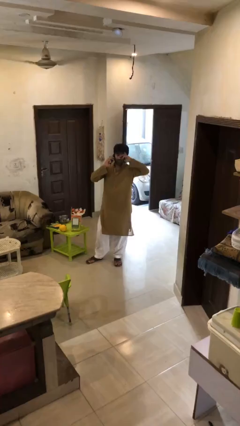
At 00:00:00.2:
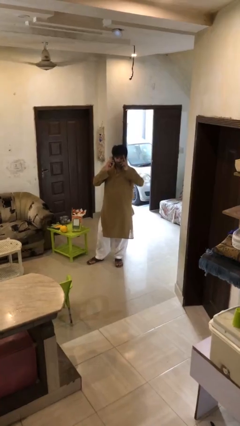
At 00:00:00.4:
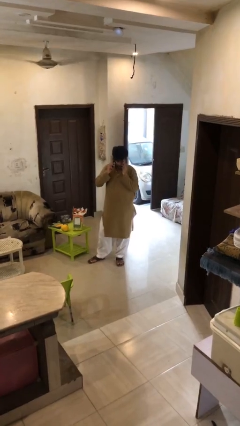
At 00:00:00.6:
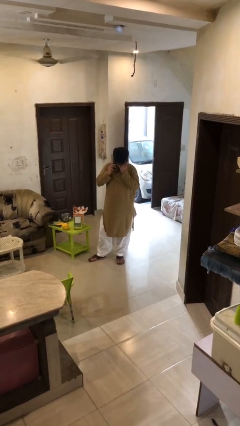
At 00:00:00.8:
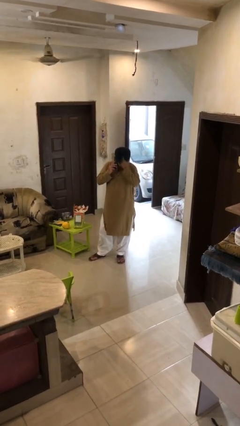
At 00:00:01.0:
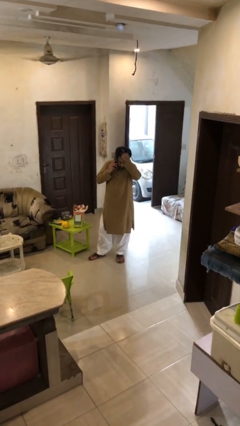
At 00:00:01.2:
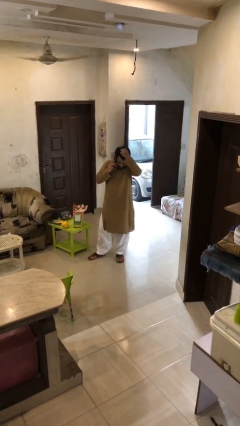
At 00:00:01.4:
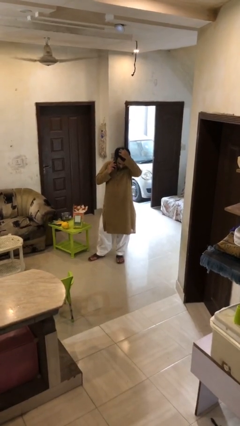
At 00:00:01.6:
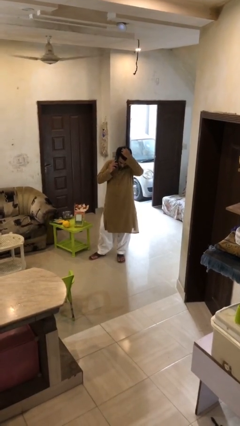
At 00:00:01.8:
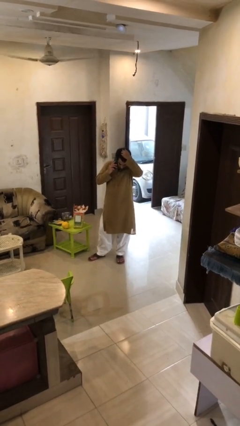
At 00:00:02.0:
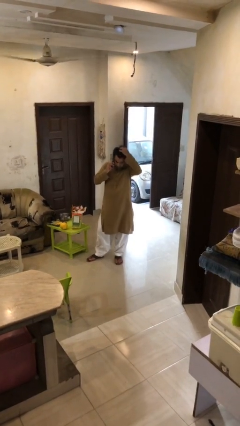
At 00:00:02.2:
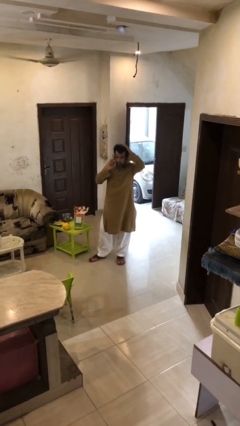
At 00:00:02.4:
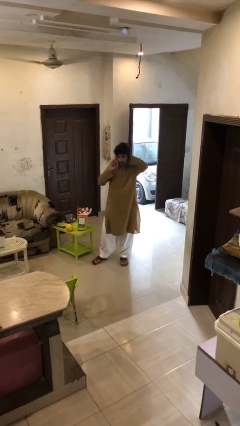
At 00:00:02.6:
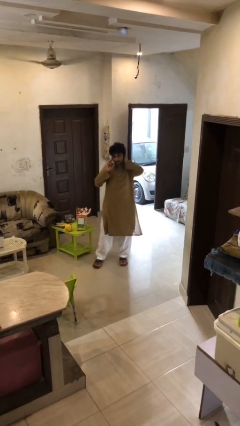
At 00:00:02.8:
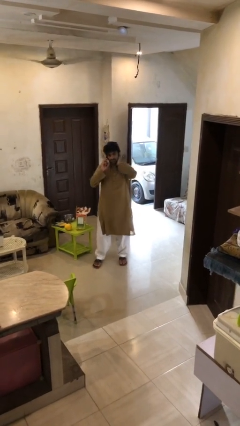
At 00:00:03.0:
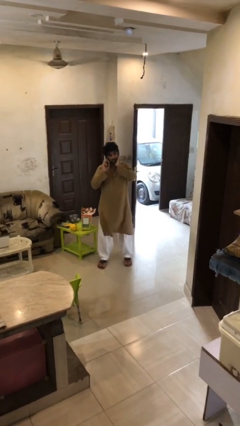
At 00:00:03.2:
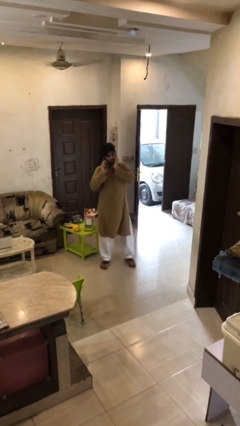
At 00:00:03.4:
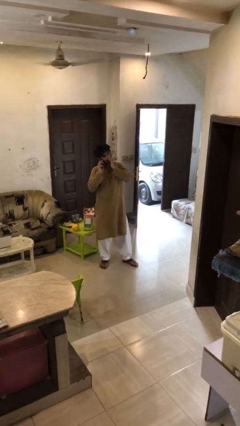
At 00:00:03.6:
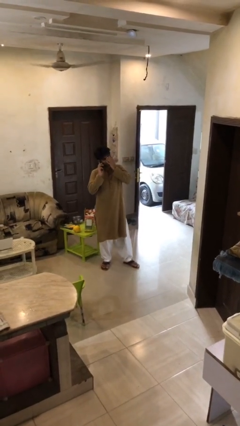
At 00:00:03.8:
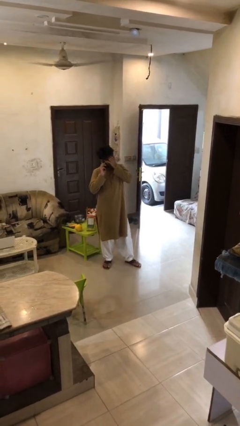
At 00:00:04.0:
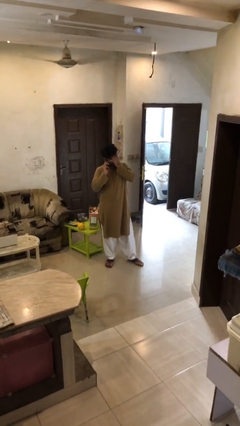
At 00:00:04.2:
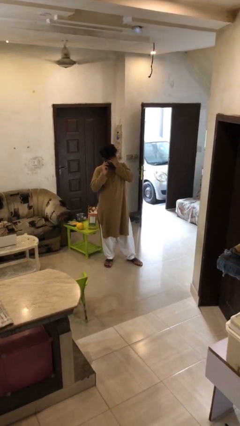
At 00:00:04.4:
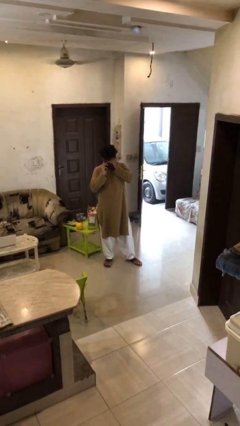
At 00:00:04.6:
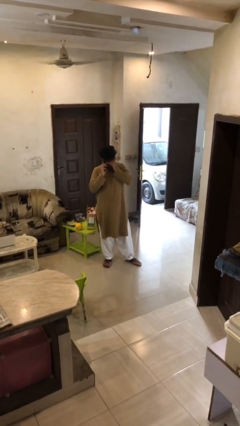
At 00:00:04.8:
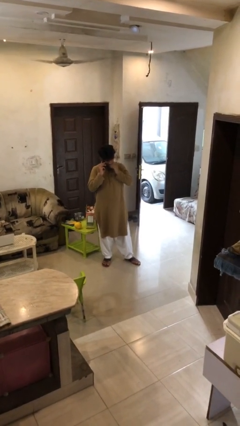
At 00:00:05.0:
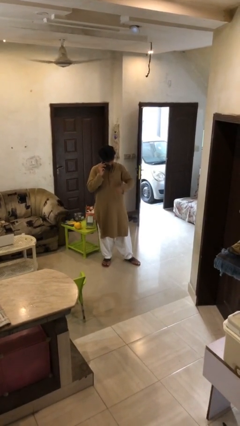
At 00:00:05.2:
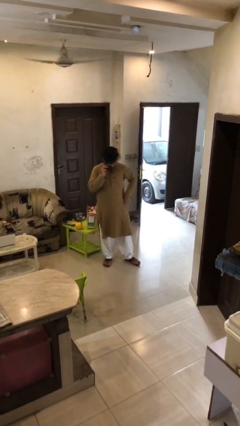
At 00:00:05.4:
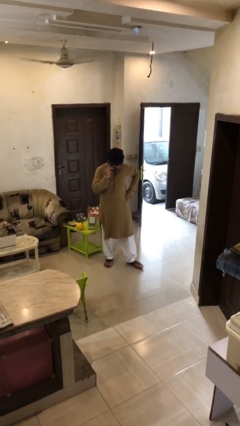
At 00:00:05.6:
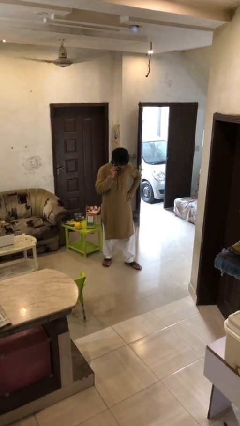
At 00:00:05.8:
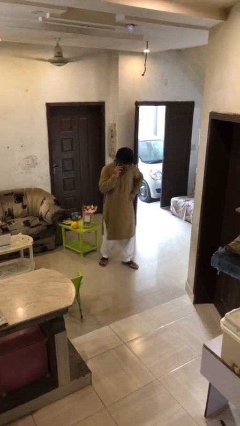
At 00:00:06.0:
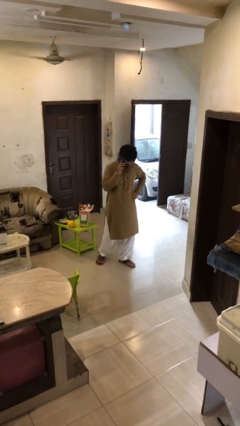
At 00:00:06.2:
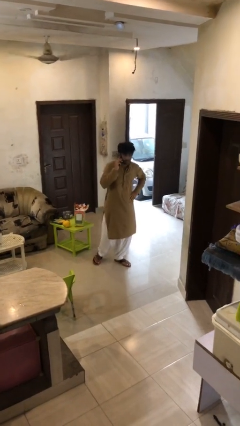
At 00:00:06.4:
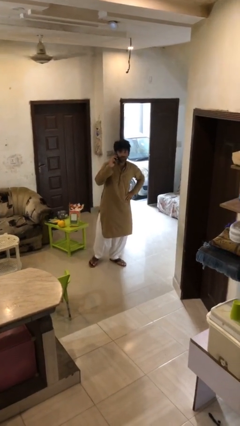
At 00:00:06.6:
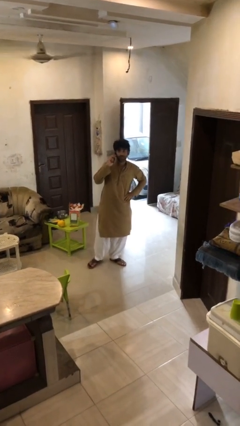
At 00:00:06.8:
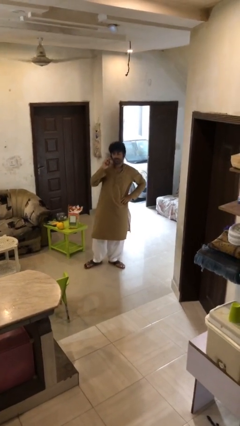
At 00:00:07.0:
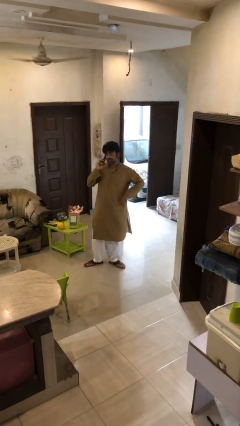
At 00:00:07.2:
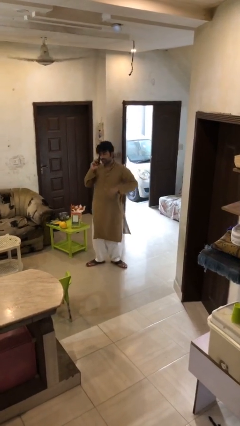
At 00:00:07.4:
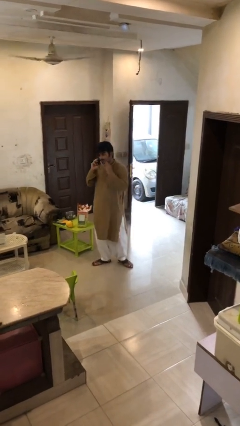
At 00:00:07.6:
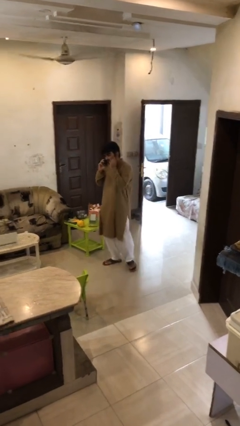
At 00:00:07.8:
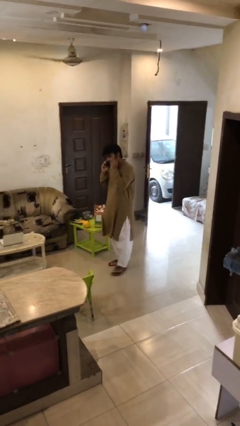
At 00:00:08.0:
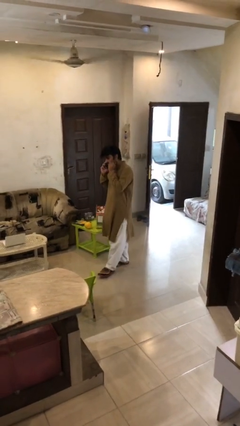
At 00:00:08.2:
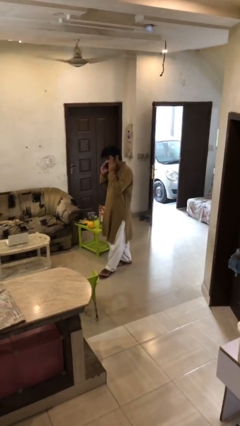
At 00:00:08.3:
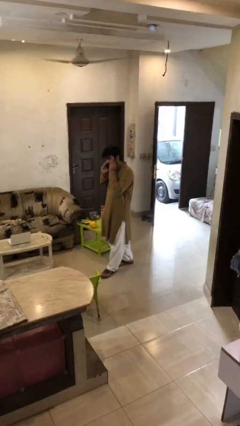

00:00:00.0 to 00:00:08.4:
person talks on phone

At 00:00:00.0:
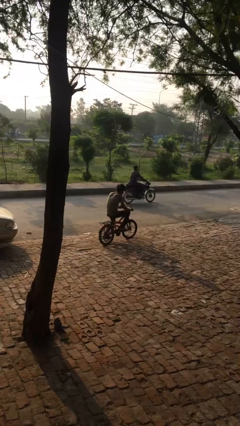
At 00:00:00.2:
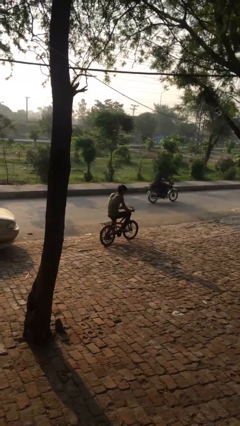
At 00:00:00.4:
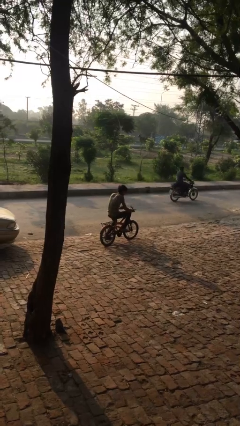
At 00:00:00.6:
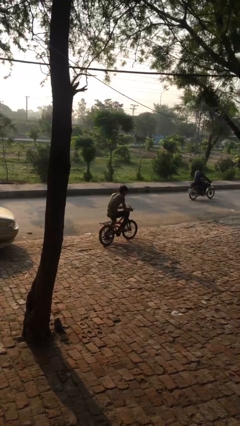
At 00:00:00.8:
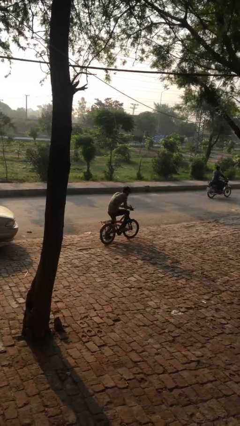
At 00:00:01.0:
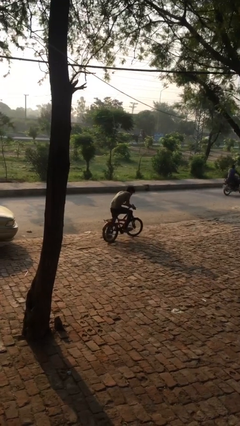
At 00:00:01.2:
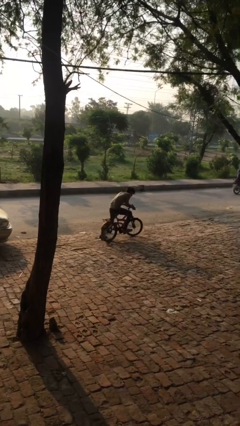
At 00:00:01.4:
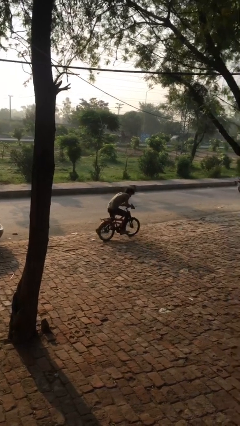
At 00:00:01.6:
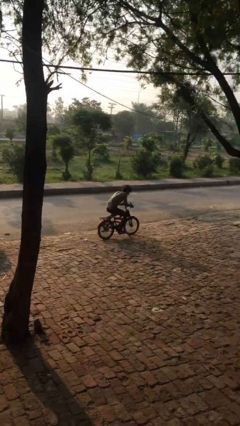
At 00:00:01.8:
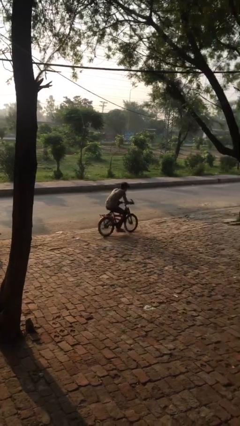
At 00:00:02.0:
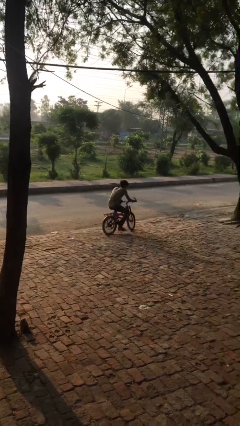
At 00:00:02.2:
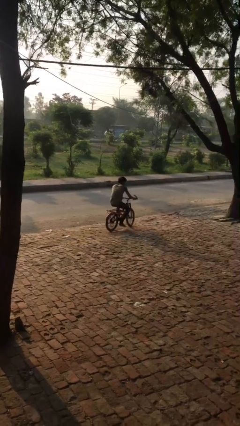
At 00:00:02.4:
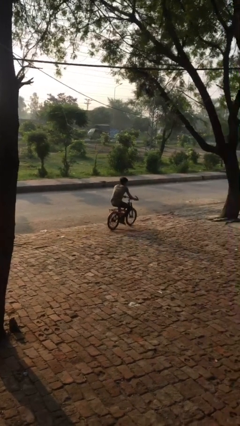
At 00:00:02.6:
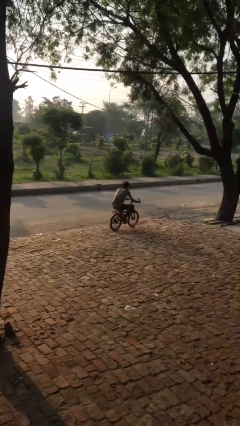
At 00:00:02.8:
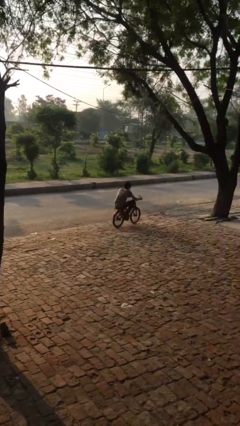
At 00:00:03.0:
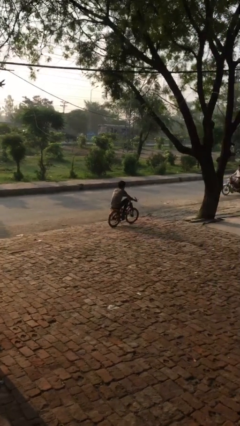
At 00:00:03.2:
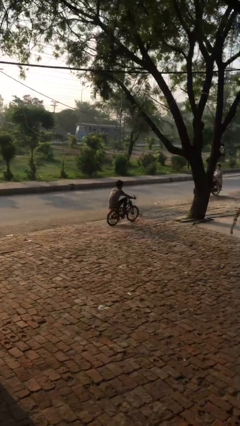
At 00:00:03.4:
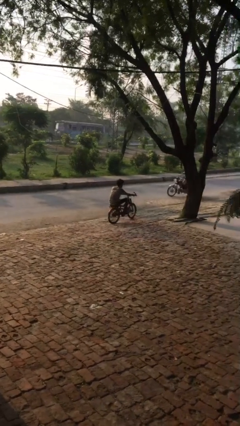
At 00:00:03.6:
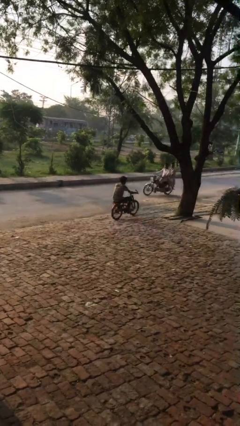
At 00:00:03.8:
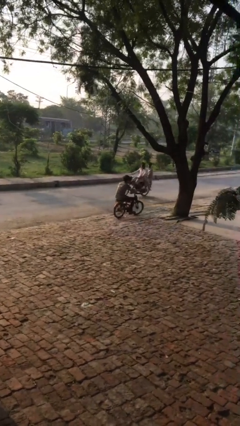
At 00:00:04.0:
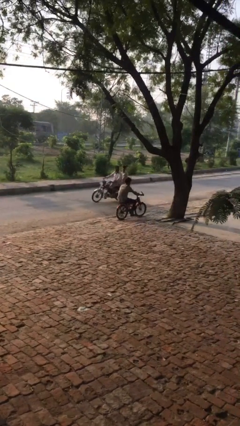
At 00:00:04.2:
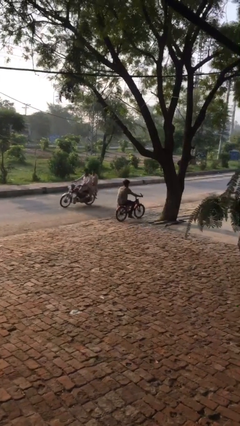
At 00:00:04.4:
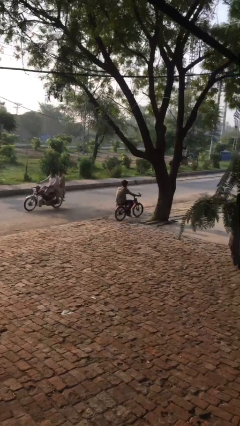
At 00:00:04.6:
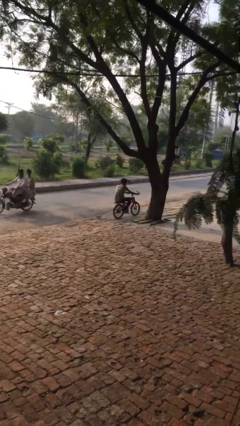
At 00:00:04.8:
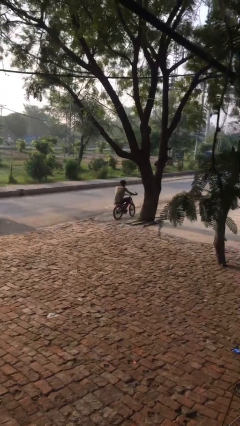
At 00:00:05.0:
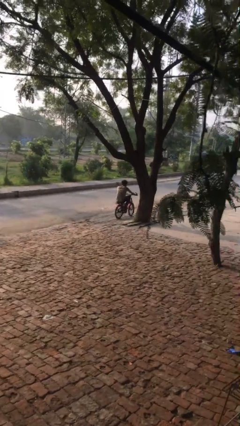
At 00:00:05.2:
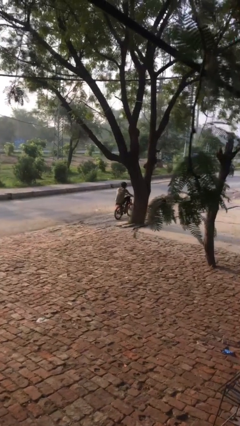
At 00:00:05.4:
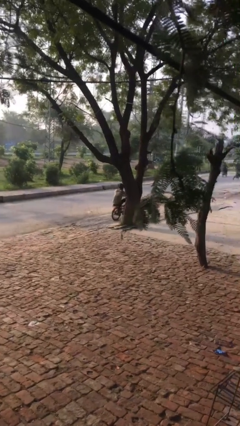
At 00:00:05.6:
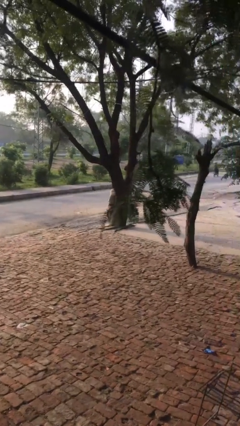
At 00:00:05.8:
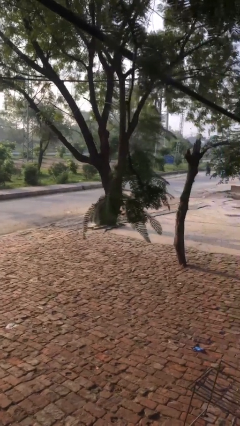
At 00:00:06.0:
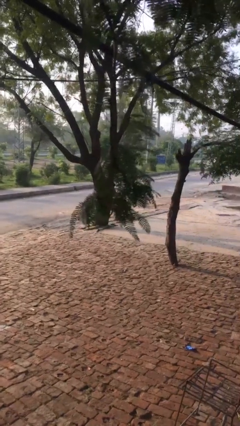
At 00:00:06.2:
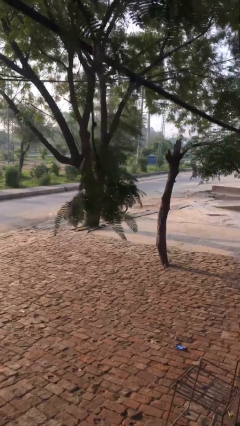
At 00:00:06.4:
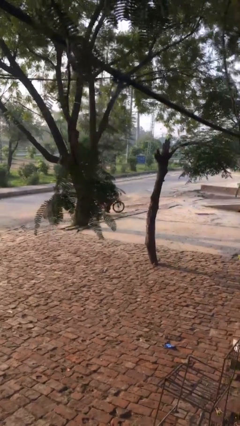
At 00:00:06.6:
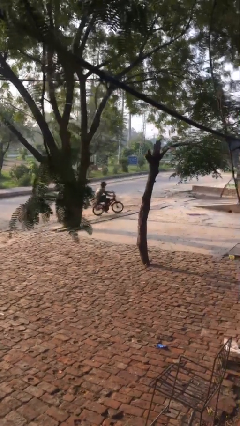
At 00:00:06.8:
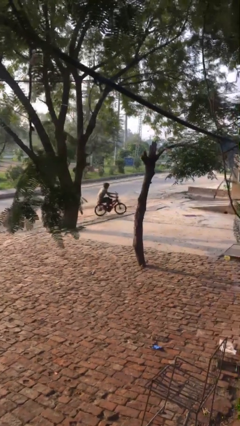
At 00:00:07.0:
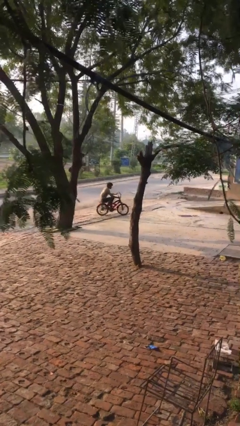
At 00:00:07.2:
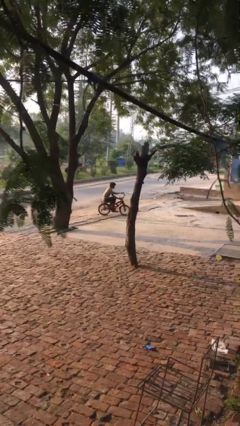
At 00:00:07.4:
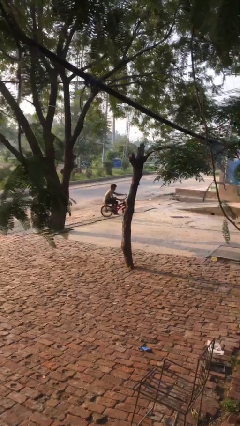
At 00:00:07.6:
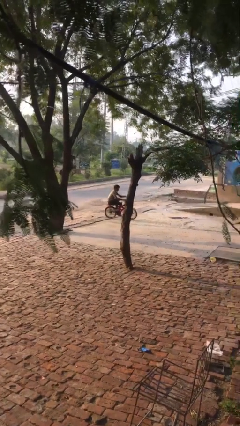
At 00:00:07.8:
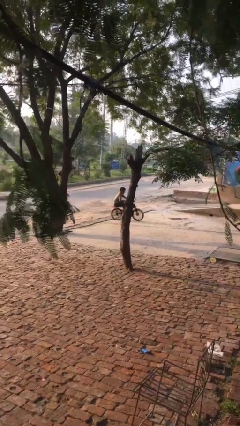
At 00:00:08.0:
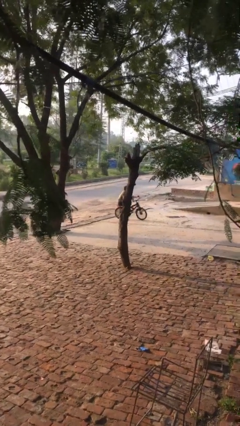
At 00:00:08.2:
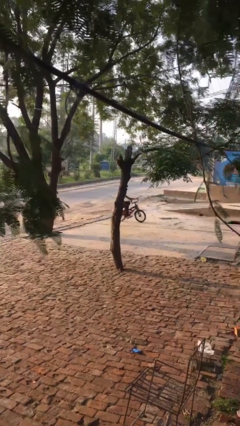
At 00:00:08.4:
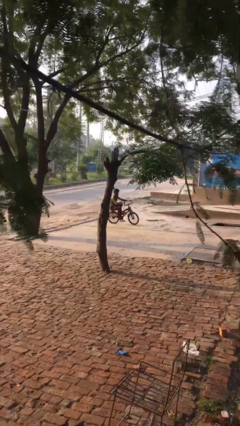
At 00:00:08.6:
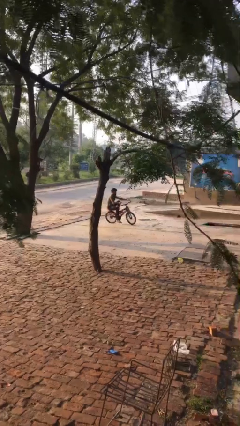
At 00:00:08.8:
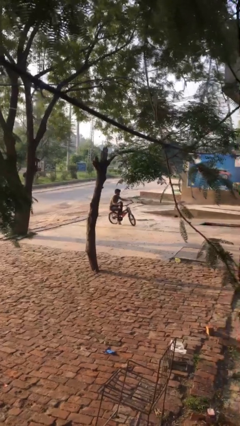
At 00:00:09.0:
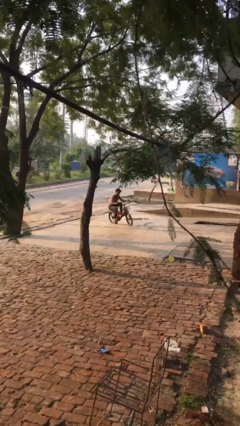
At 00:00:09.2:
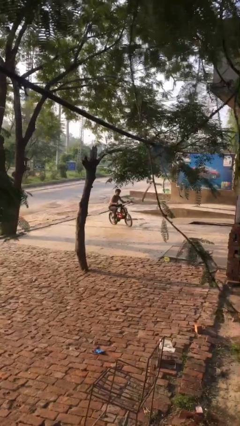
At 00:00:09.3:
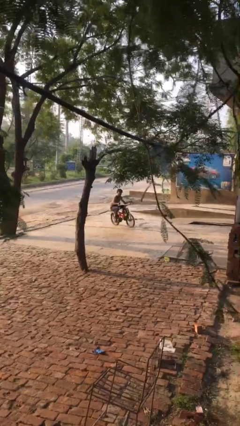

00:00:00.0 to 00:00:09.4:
person rides bicycle
